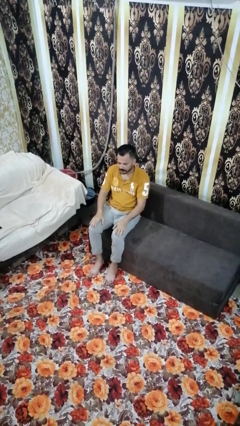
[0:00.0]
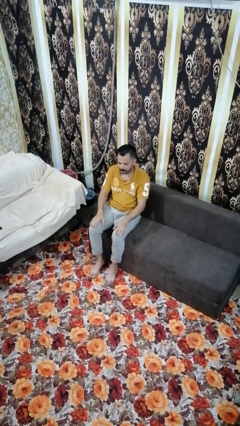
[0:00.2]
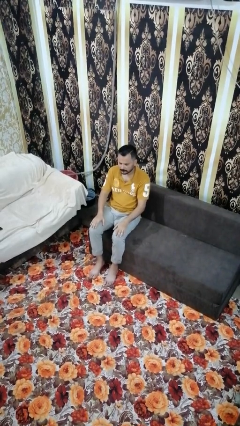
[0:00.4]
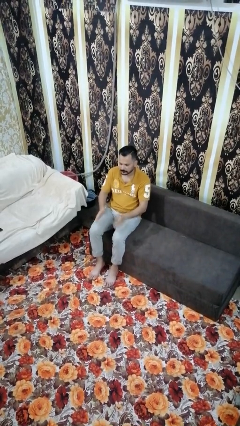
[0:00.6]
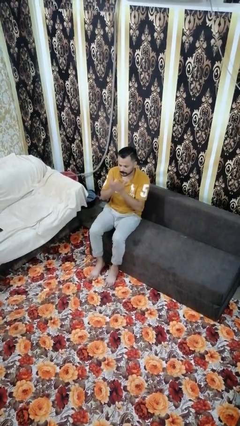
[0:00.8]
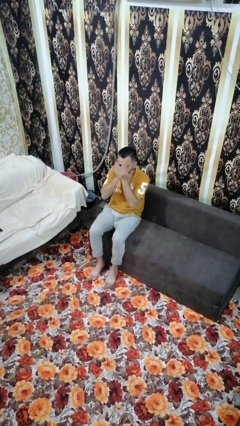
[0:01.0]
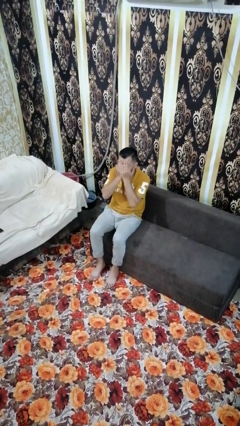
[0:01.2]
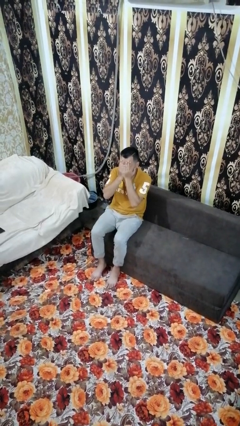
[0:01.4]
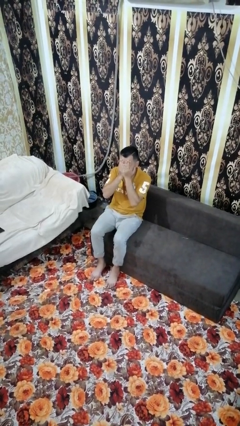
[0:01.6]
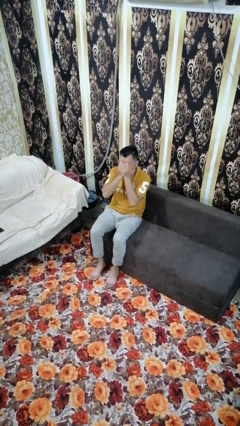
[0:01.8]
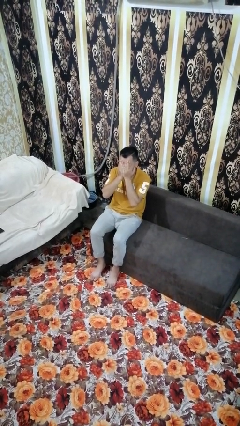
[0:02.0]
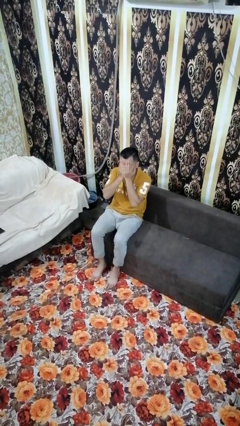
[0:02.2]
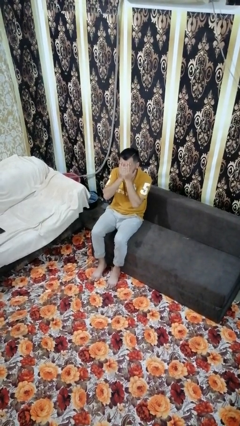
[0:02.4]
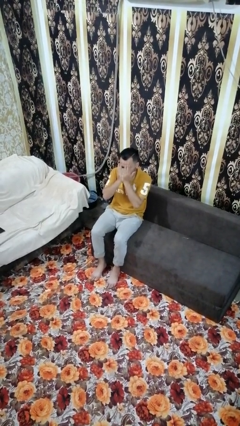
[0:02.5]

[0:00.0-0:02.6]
person covers face with hands

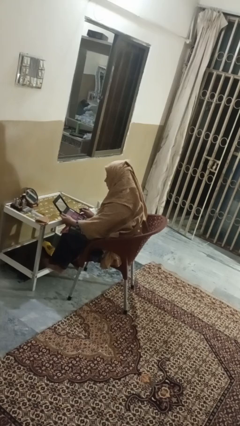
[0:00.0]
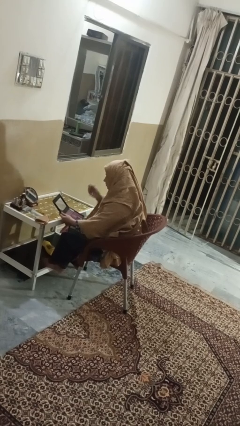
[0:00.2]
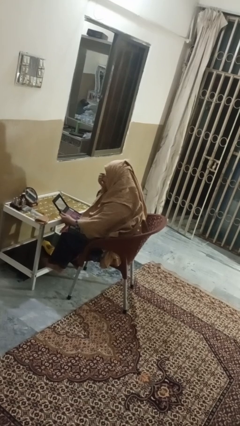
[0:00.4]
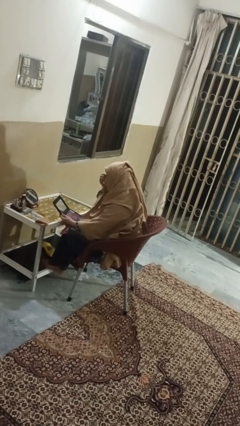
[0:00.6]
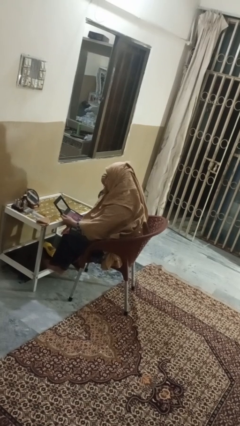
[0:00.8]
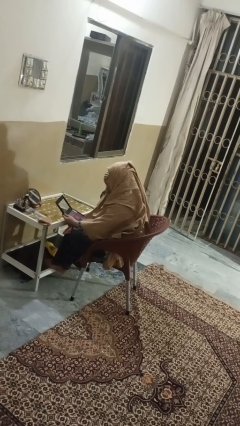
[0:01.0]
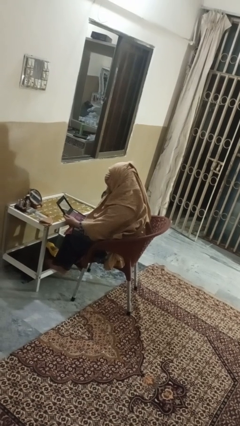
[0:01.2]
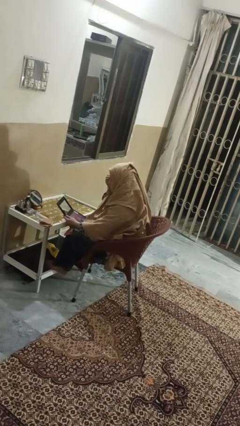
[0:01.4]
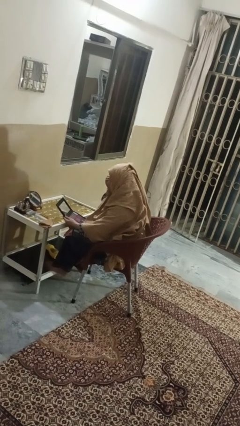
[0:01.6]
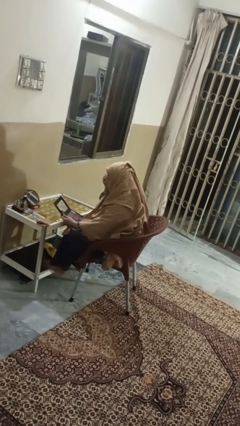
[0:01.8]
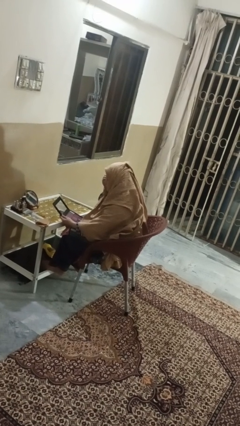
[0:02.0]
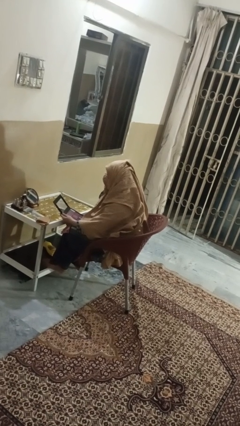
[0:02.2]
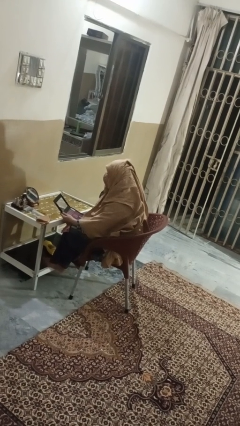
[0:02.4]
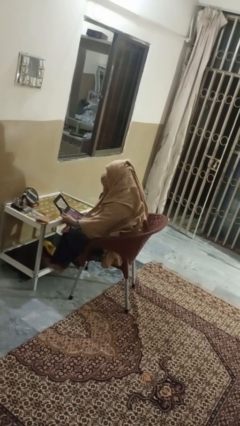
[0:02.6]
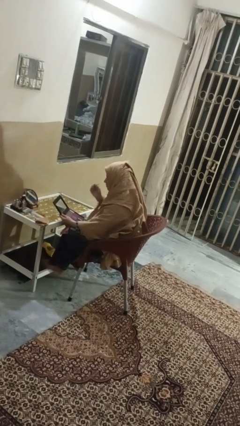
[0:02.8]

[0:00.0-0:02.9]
person applies eye makeup

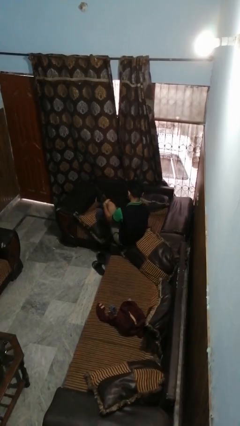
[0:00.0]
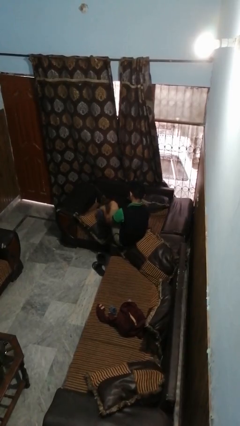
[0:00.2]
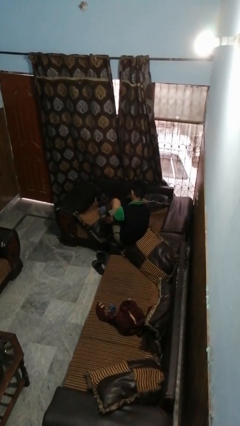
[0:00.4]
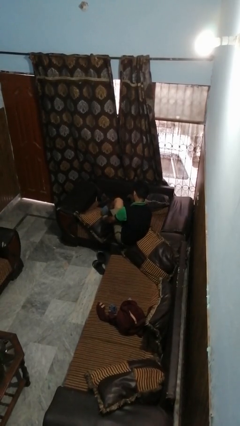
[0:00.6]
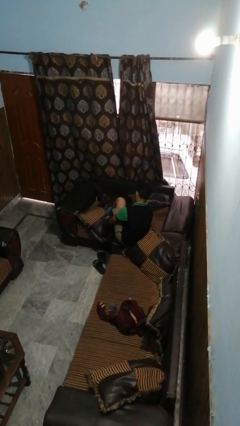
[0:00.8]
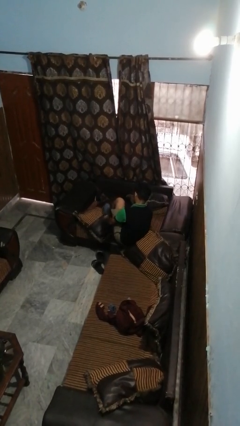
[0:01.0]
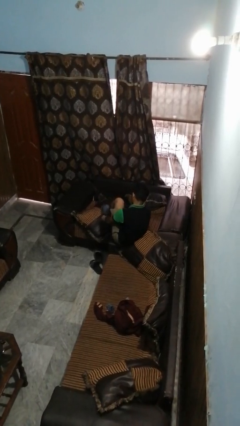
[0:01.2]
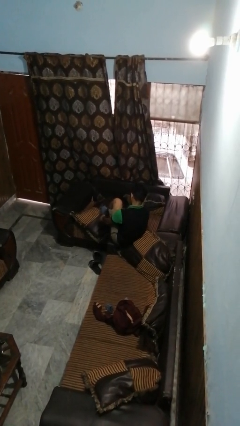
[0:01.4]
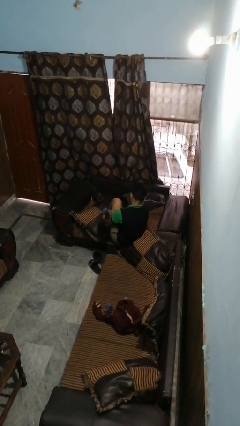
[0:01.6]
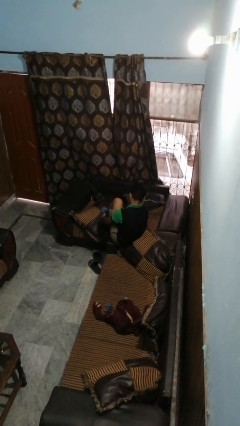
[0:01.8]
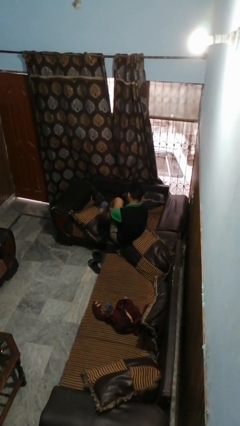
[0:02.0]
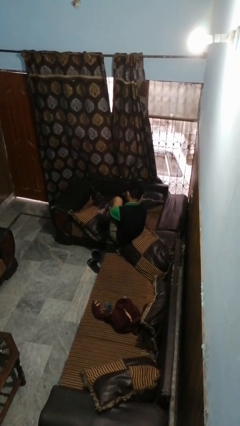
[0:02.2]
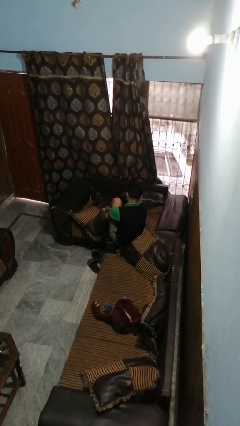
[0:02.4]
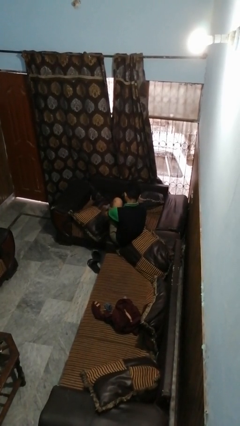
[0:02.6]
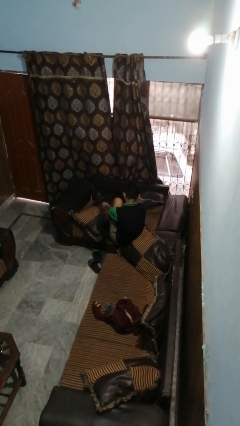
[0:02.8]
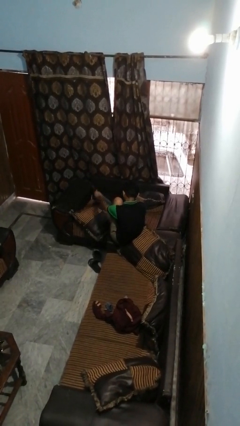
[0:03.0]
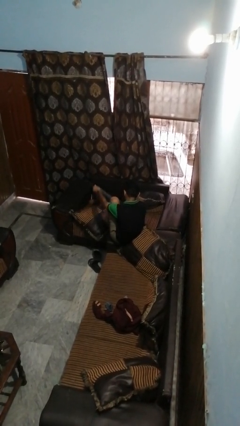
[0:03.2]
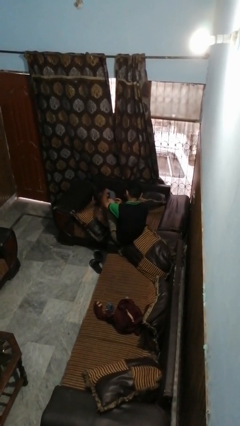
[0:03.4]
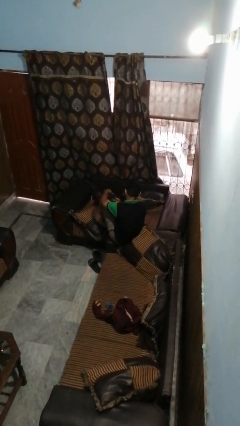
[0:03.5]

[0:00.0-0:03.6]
person takes off socks

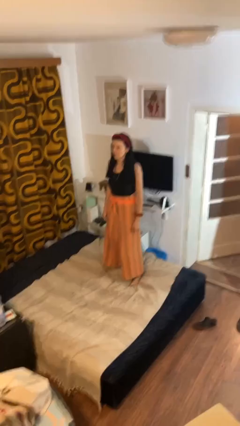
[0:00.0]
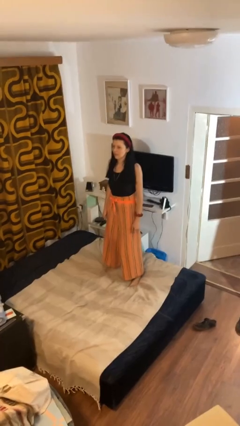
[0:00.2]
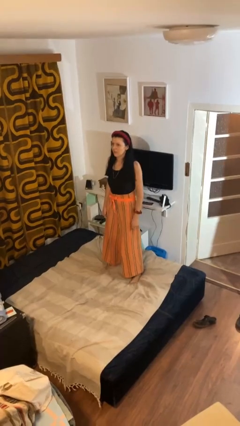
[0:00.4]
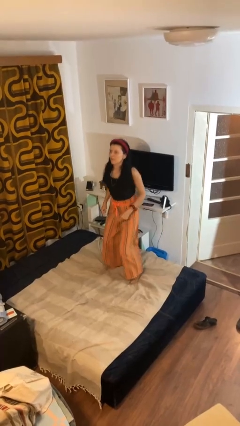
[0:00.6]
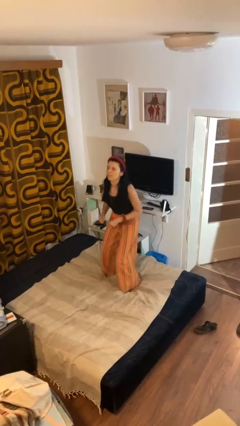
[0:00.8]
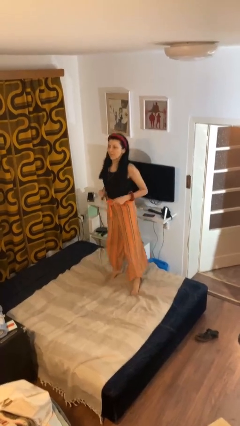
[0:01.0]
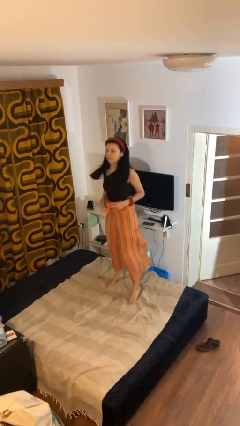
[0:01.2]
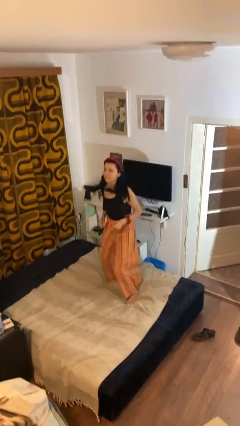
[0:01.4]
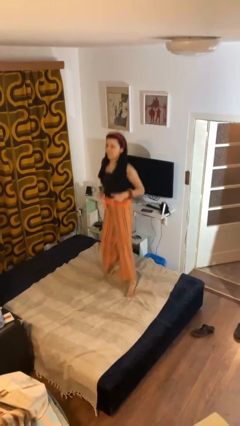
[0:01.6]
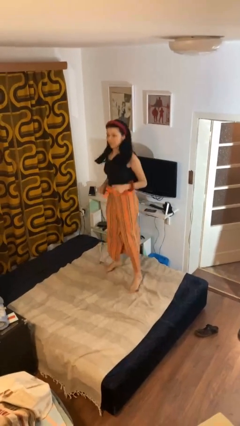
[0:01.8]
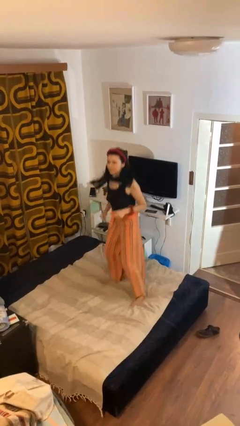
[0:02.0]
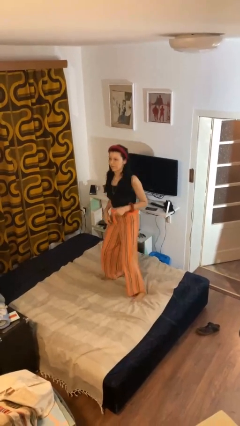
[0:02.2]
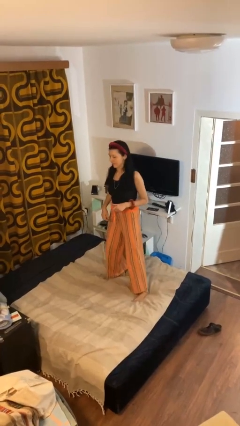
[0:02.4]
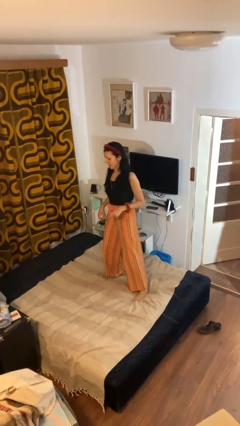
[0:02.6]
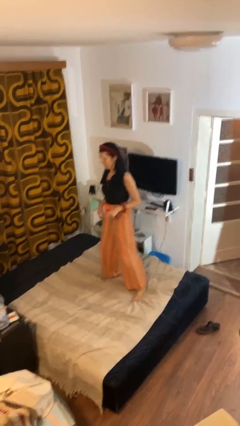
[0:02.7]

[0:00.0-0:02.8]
person jumps on bed

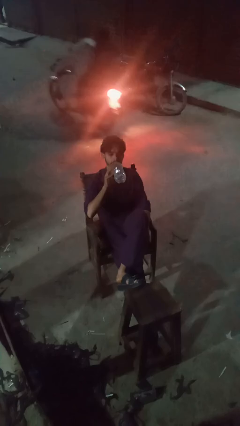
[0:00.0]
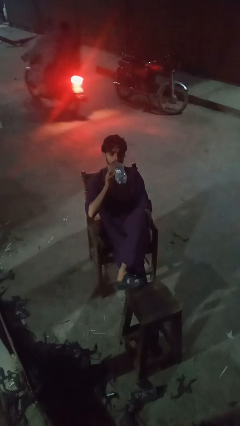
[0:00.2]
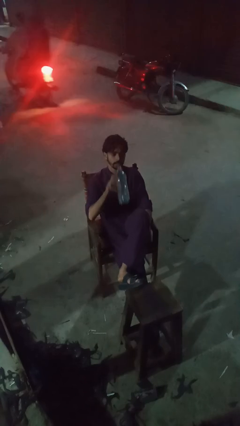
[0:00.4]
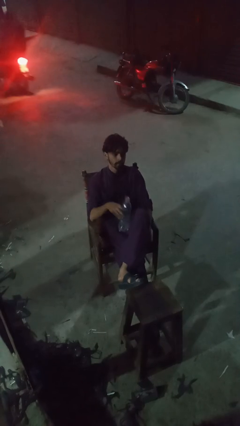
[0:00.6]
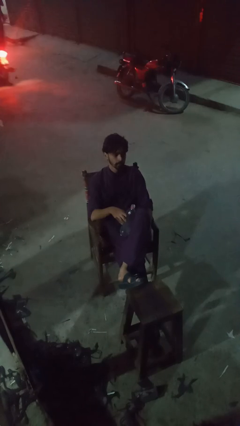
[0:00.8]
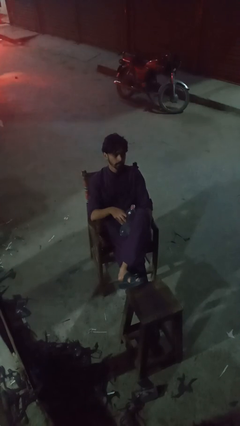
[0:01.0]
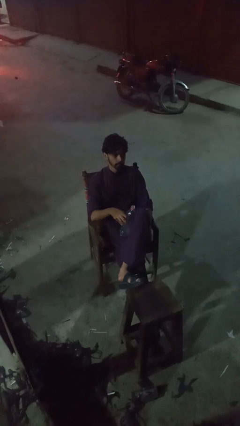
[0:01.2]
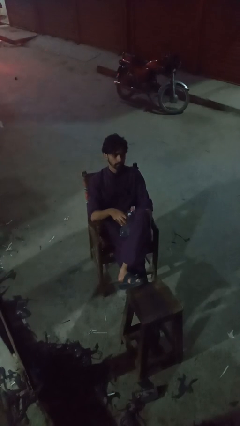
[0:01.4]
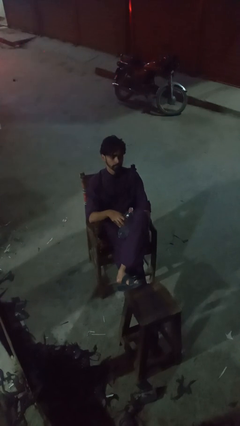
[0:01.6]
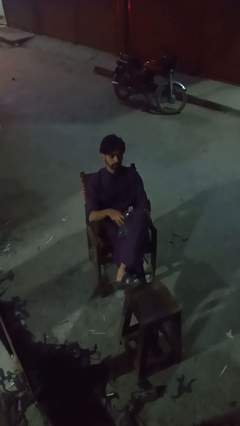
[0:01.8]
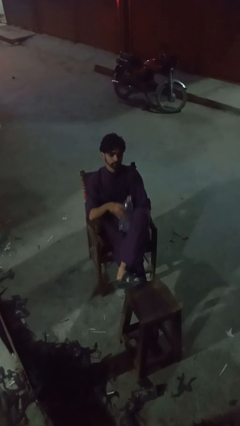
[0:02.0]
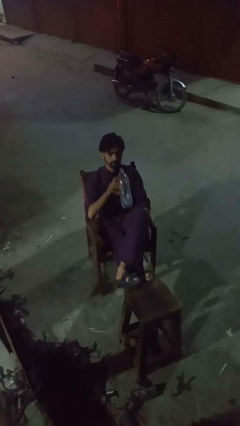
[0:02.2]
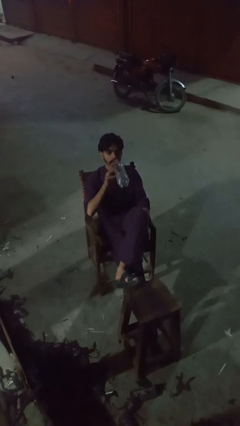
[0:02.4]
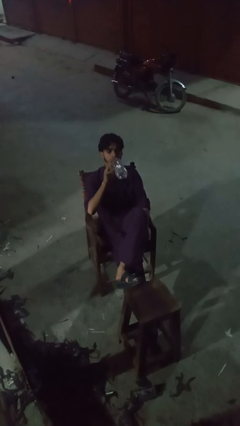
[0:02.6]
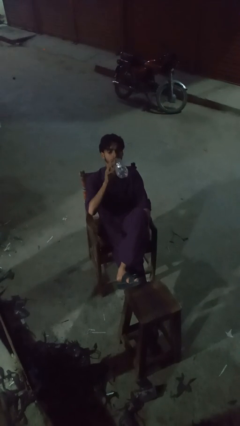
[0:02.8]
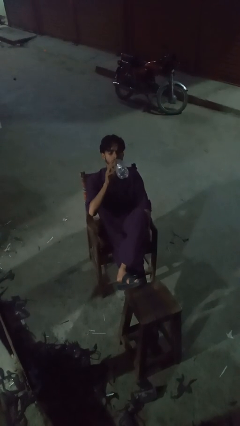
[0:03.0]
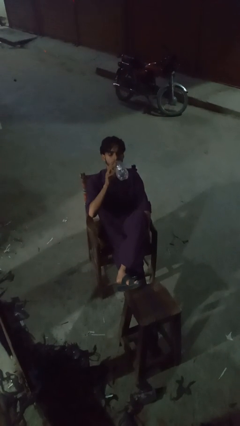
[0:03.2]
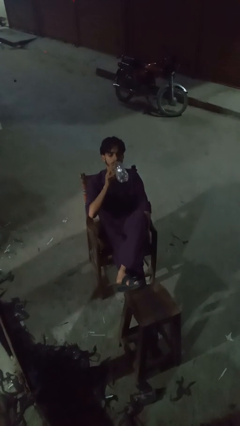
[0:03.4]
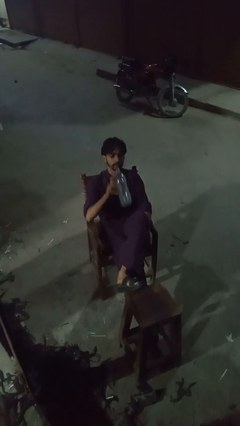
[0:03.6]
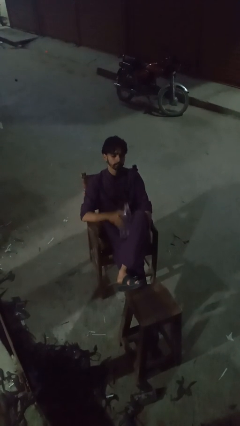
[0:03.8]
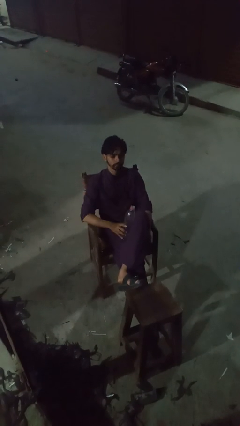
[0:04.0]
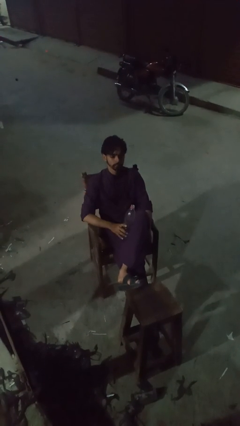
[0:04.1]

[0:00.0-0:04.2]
person drinks from bottle

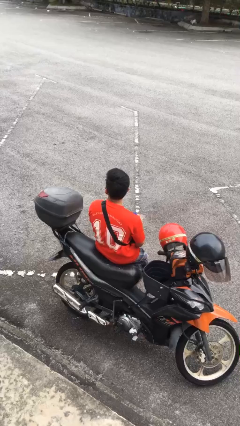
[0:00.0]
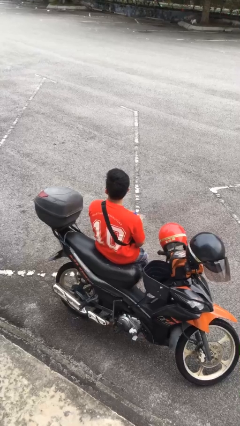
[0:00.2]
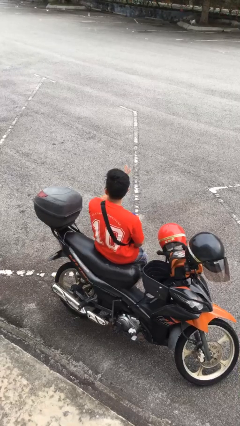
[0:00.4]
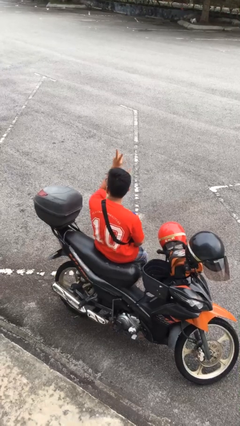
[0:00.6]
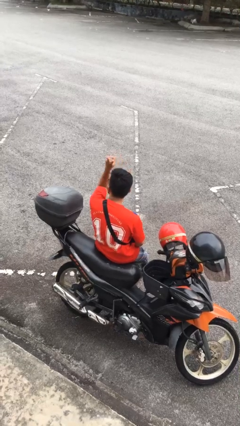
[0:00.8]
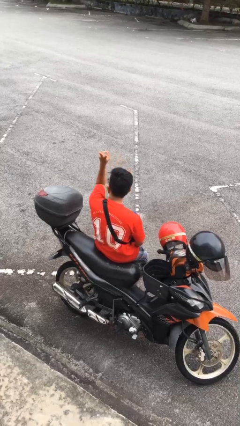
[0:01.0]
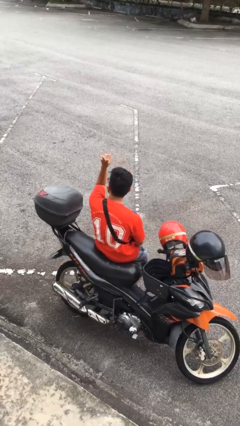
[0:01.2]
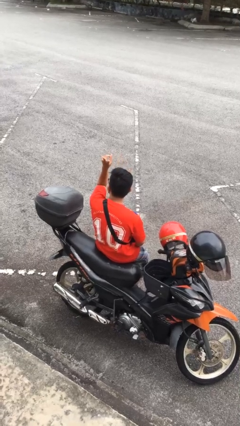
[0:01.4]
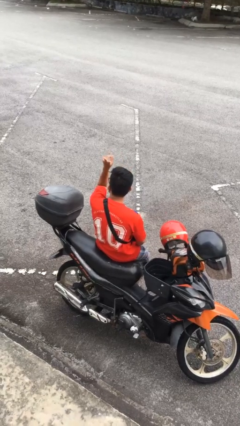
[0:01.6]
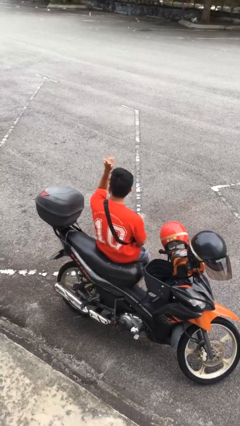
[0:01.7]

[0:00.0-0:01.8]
person gestures peace
